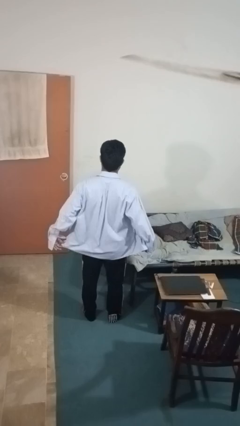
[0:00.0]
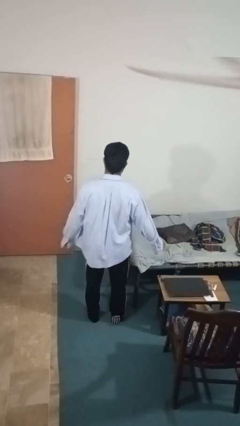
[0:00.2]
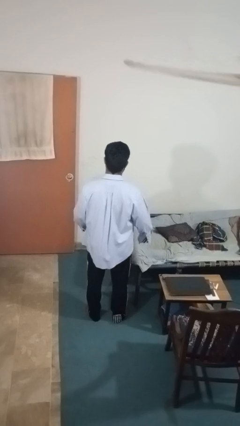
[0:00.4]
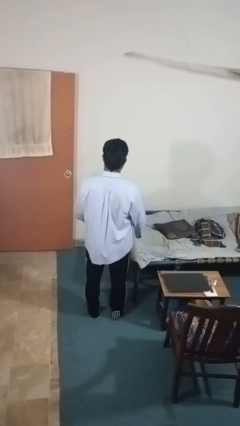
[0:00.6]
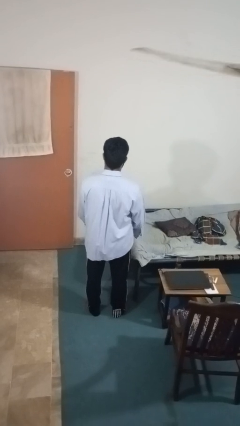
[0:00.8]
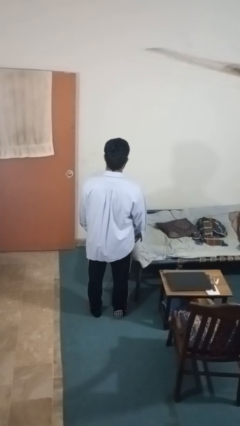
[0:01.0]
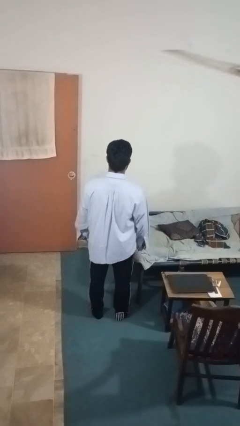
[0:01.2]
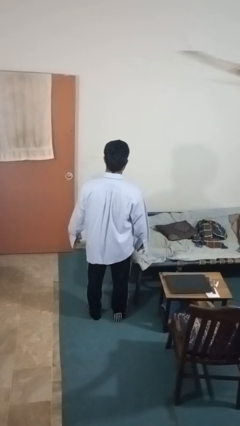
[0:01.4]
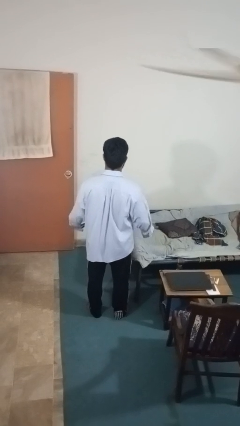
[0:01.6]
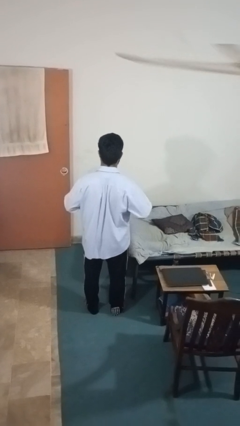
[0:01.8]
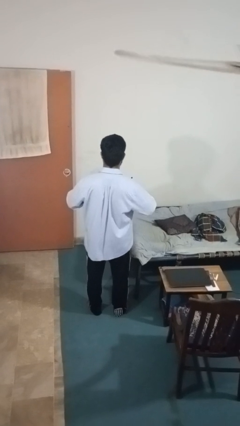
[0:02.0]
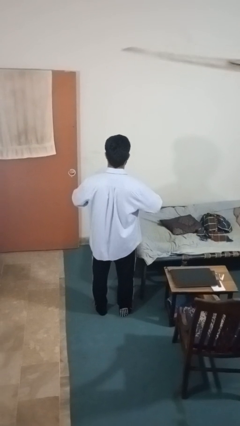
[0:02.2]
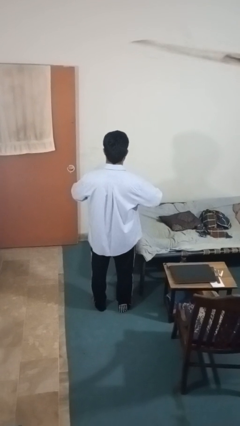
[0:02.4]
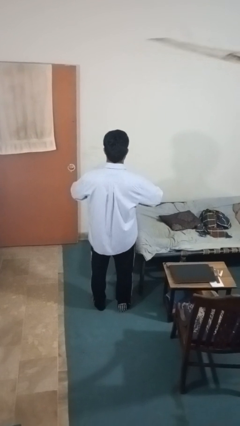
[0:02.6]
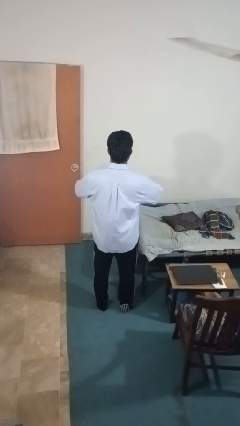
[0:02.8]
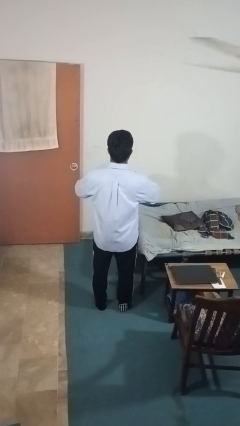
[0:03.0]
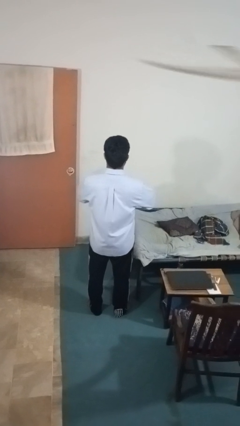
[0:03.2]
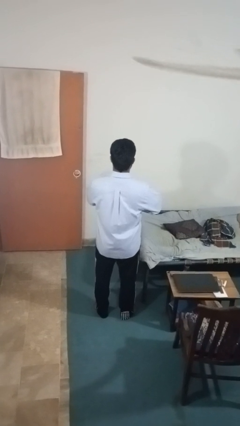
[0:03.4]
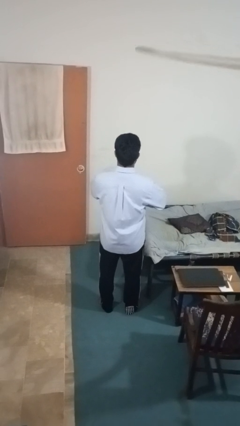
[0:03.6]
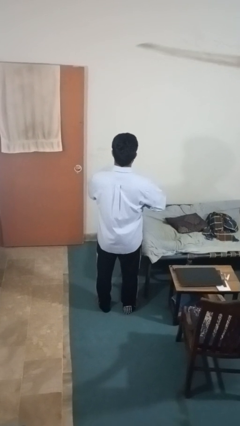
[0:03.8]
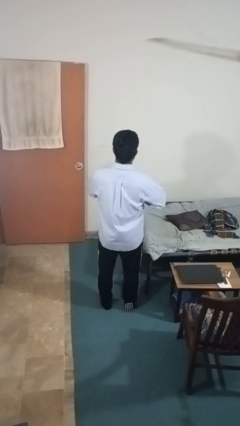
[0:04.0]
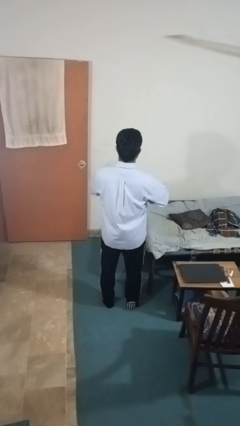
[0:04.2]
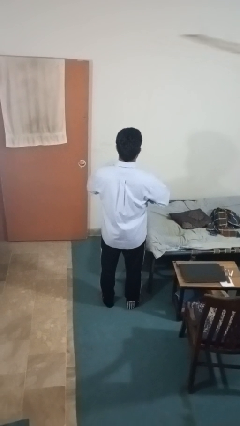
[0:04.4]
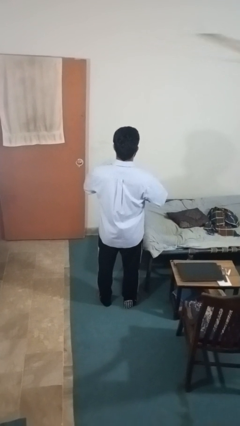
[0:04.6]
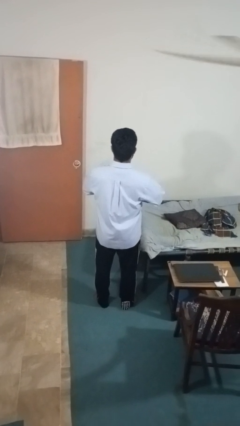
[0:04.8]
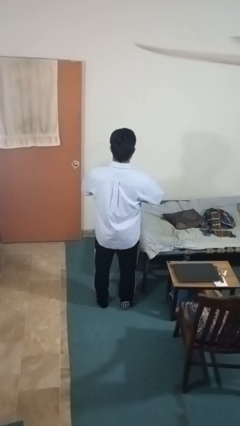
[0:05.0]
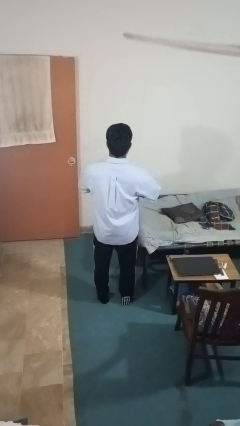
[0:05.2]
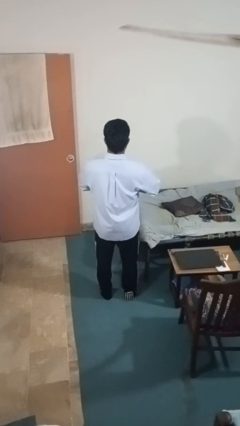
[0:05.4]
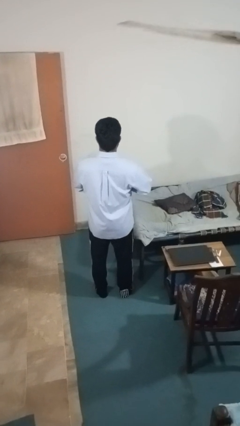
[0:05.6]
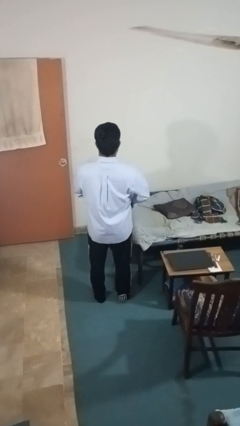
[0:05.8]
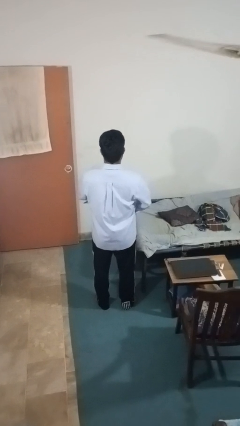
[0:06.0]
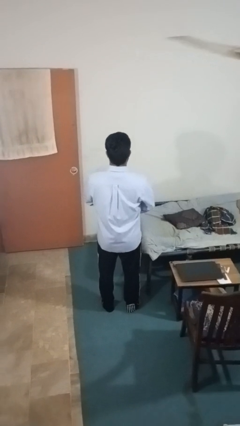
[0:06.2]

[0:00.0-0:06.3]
person buttons shirt

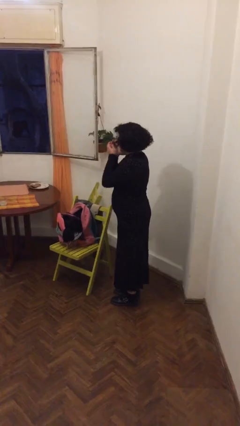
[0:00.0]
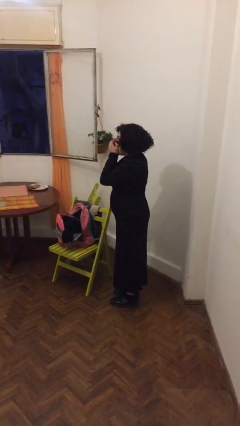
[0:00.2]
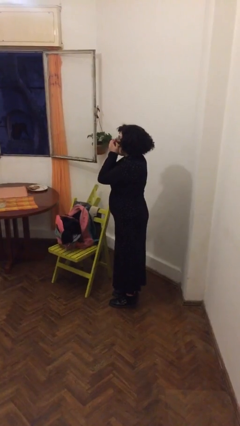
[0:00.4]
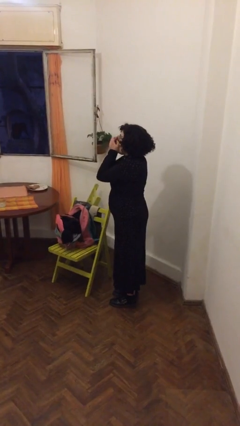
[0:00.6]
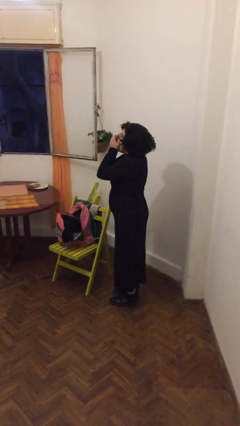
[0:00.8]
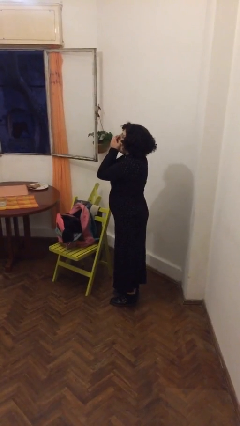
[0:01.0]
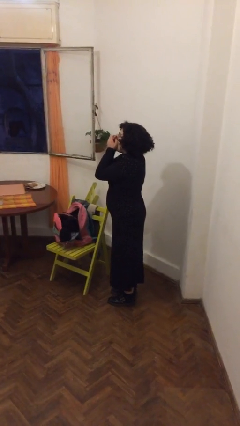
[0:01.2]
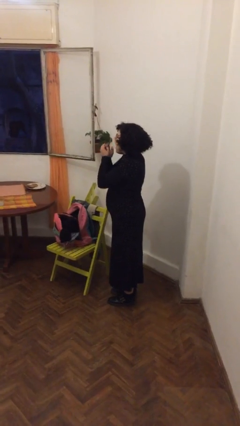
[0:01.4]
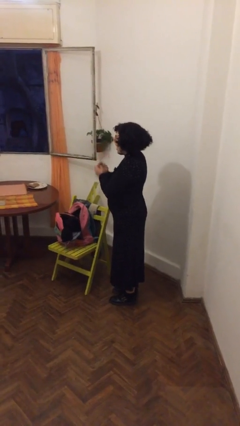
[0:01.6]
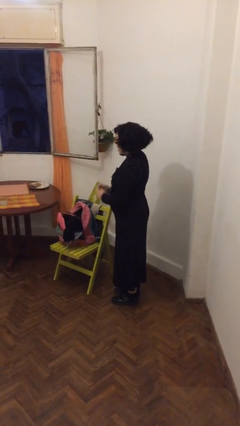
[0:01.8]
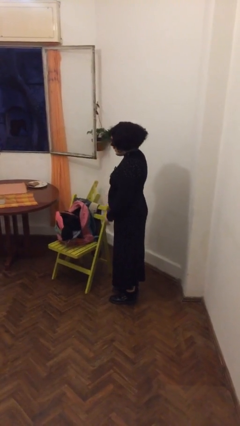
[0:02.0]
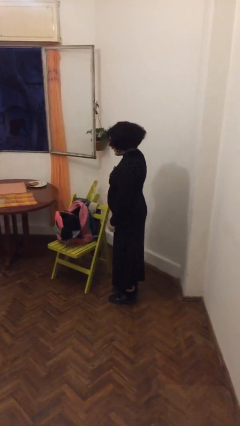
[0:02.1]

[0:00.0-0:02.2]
person yawns

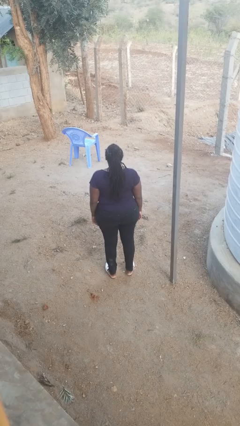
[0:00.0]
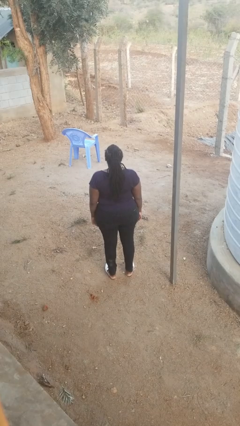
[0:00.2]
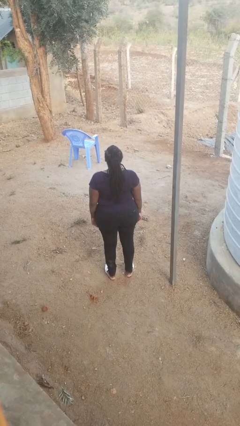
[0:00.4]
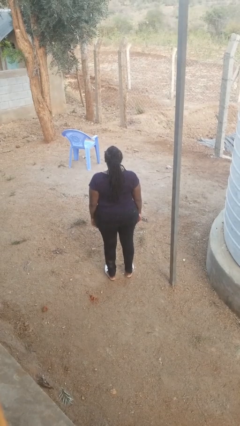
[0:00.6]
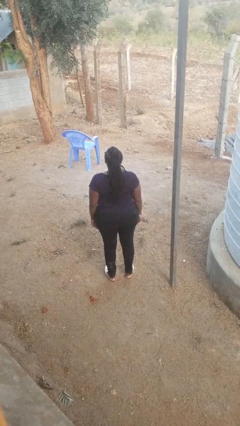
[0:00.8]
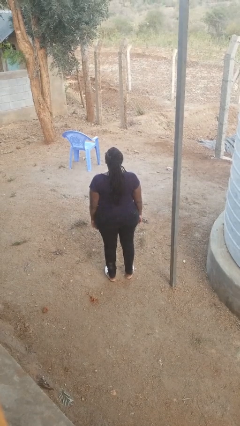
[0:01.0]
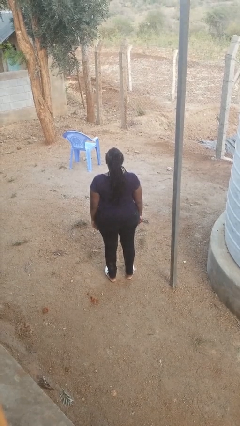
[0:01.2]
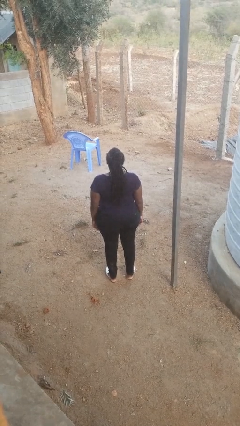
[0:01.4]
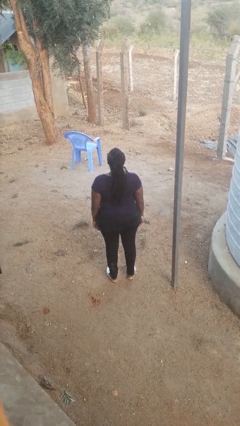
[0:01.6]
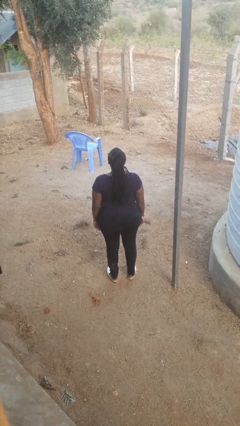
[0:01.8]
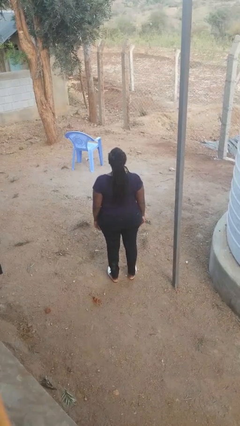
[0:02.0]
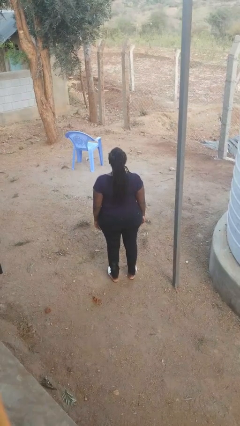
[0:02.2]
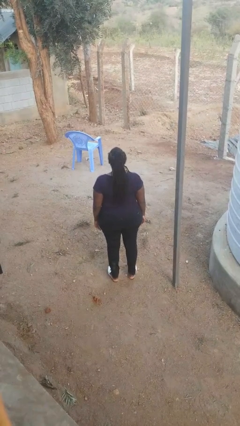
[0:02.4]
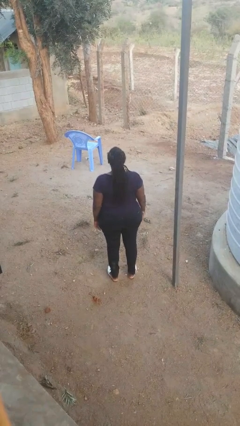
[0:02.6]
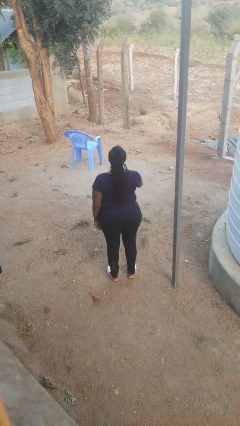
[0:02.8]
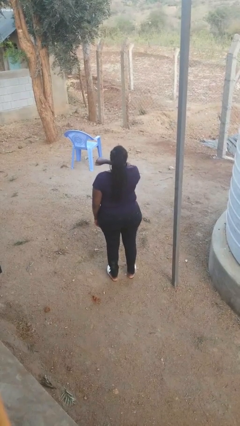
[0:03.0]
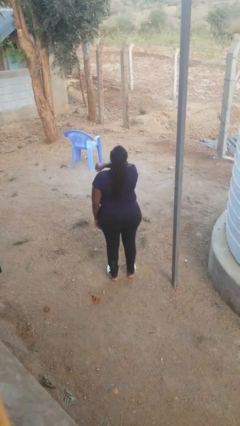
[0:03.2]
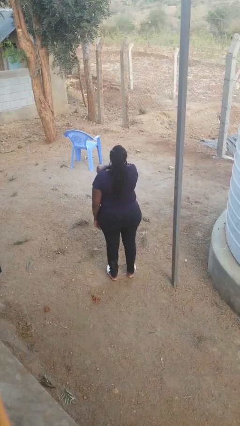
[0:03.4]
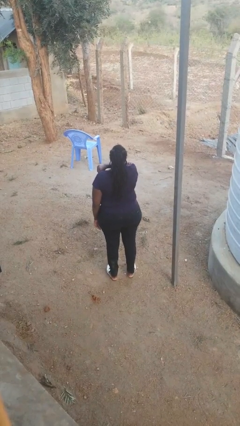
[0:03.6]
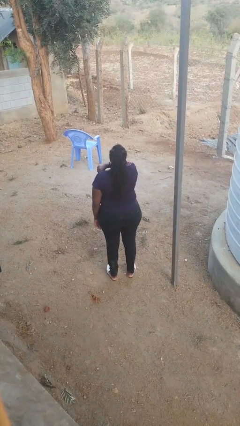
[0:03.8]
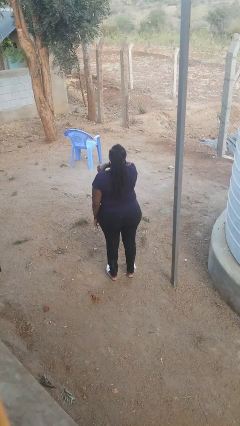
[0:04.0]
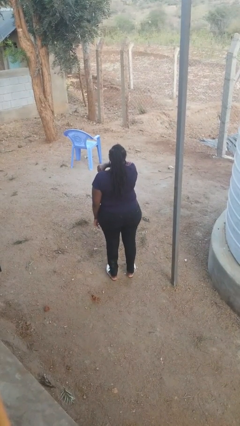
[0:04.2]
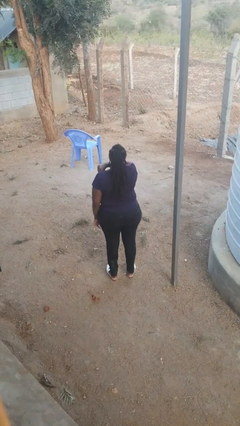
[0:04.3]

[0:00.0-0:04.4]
person sneezes into arm

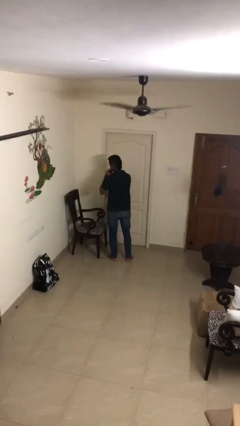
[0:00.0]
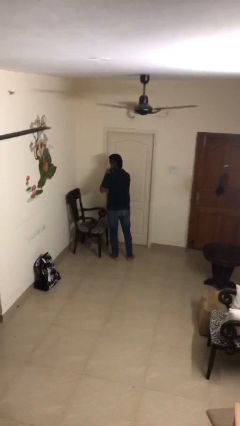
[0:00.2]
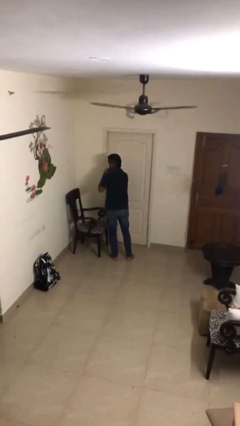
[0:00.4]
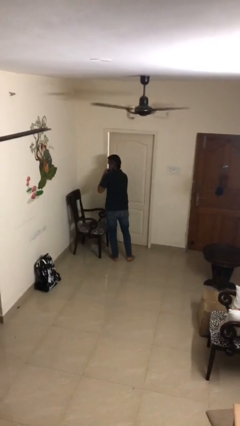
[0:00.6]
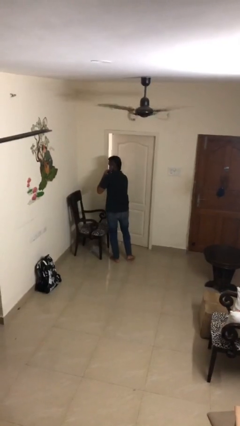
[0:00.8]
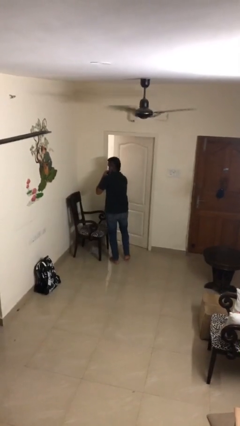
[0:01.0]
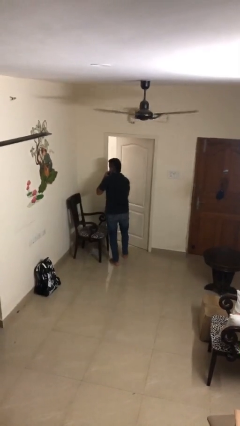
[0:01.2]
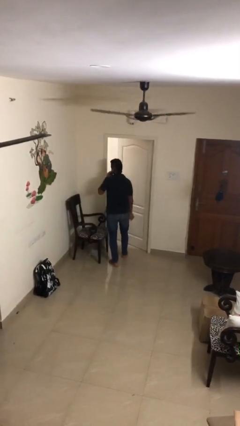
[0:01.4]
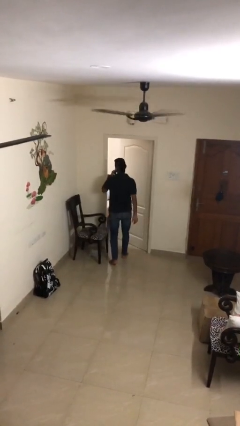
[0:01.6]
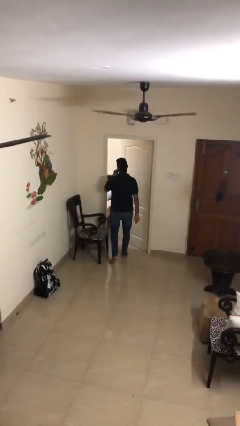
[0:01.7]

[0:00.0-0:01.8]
person opens facility door

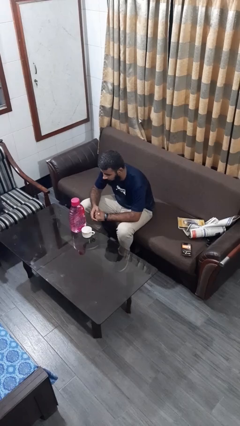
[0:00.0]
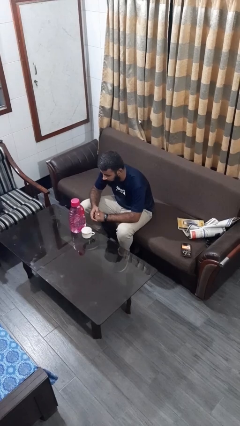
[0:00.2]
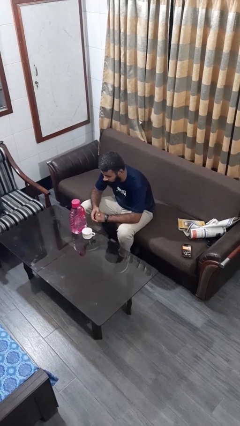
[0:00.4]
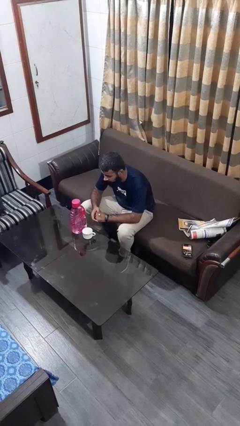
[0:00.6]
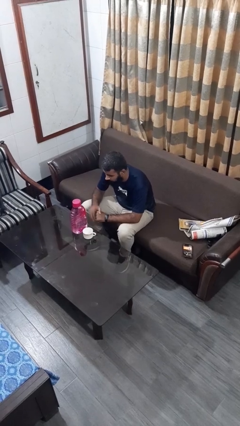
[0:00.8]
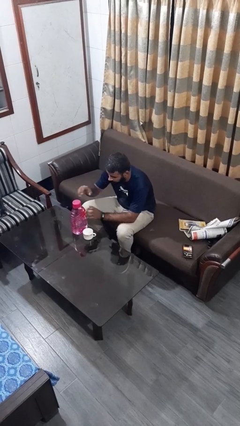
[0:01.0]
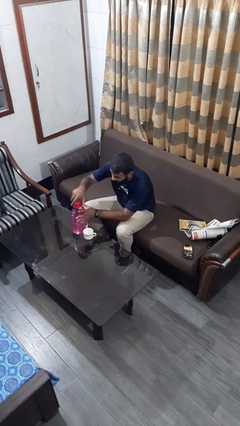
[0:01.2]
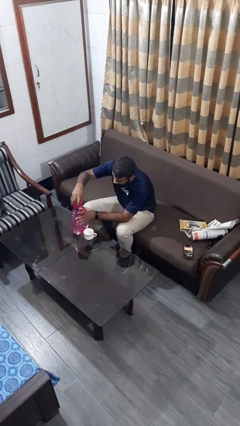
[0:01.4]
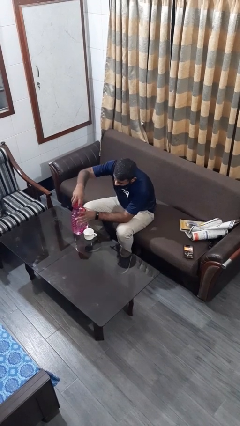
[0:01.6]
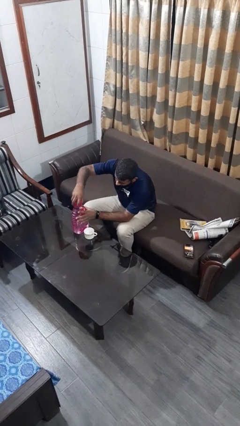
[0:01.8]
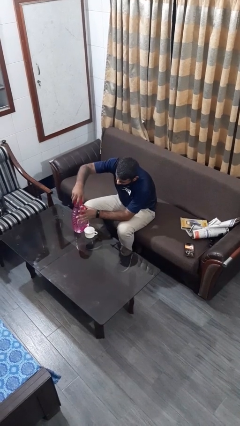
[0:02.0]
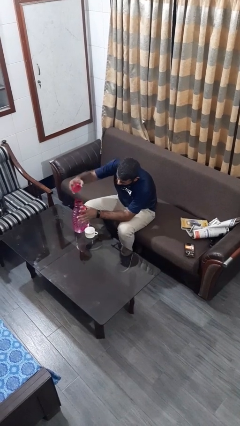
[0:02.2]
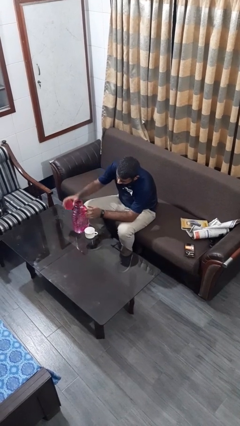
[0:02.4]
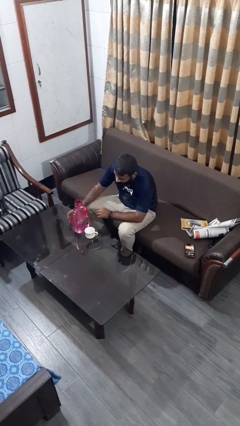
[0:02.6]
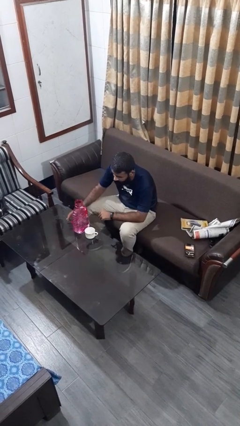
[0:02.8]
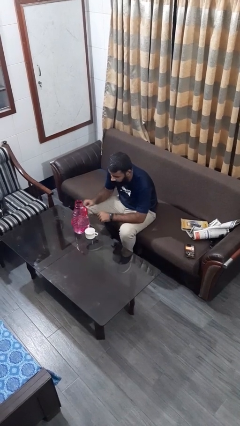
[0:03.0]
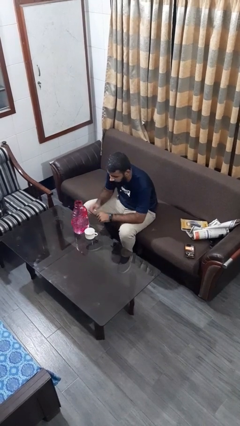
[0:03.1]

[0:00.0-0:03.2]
person unscrews lid from bottle
